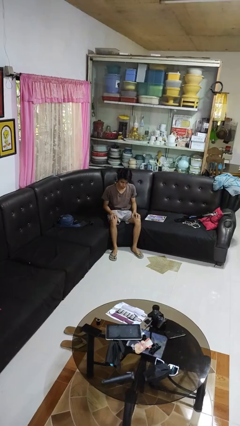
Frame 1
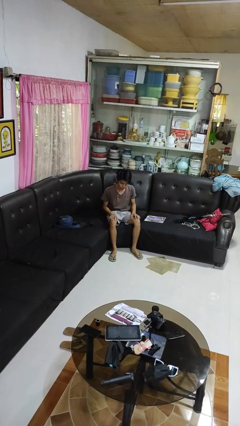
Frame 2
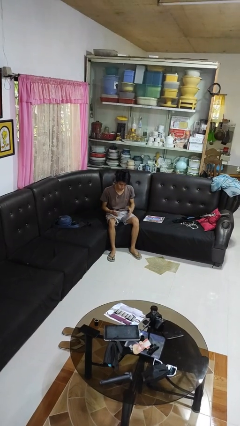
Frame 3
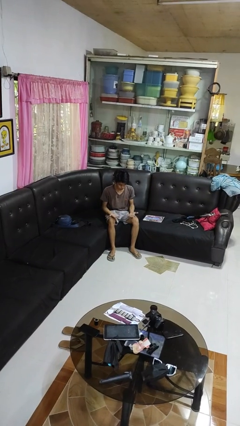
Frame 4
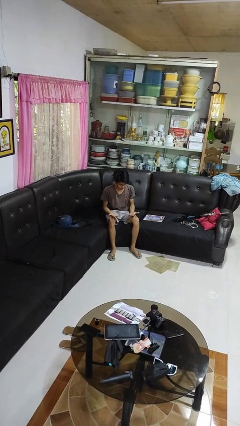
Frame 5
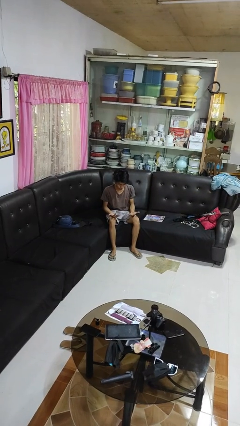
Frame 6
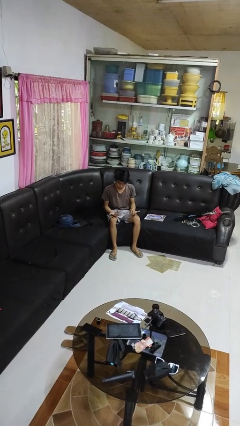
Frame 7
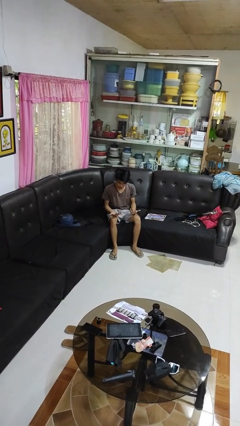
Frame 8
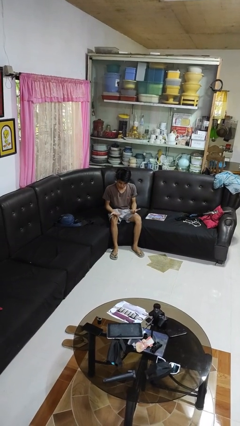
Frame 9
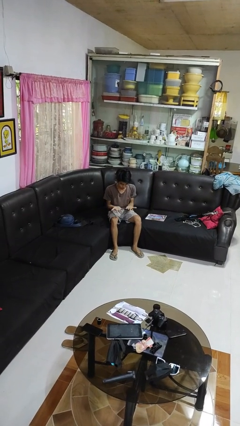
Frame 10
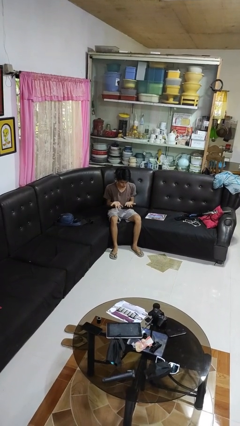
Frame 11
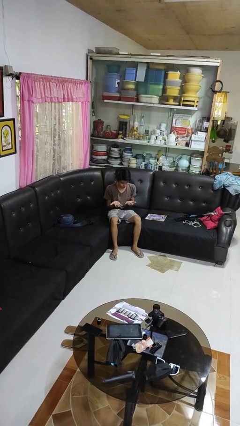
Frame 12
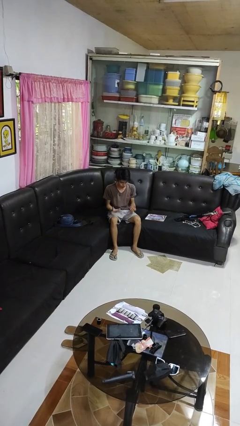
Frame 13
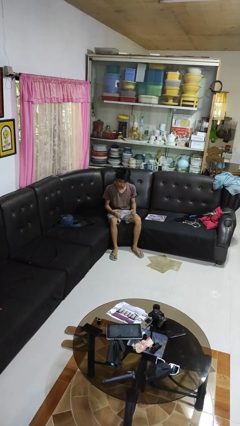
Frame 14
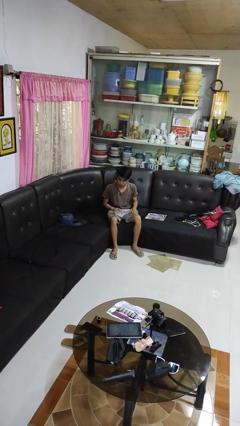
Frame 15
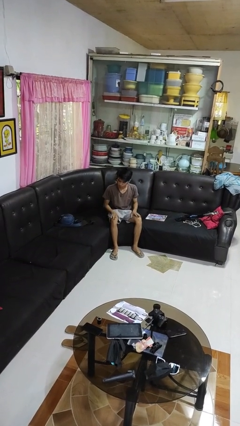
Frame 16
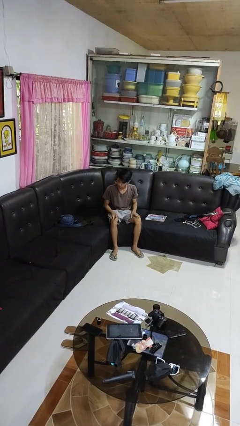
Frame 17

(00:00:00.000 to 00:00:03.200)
person looks at hands in lap

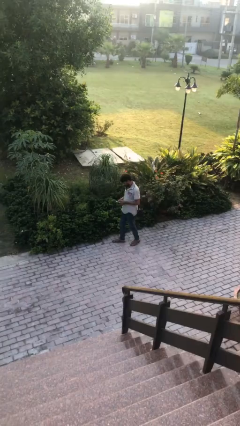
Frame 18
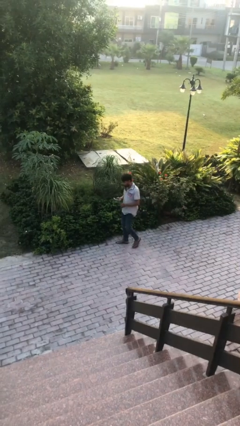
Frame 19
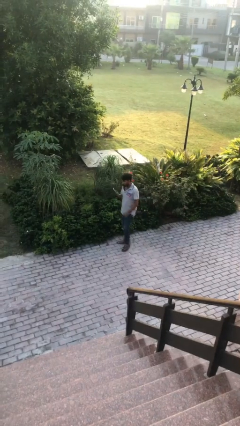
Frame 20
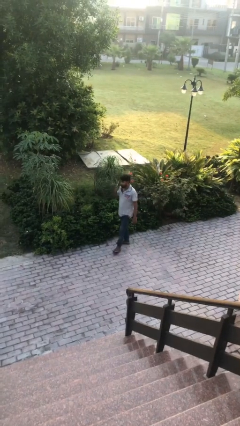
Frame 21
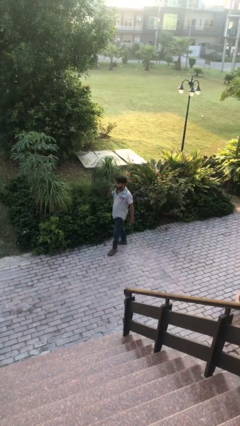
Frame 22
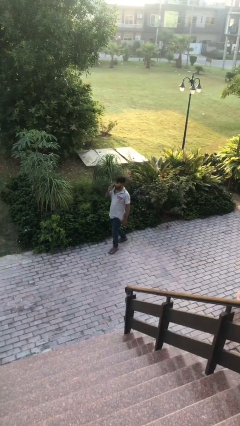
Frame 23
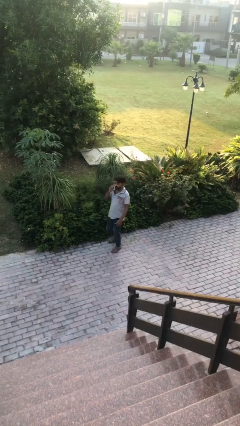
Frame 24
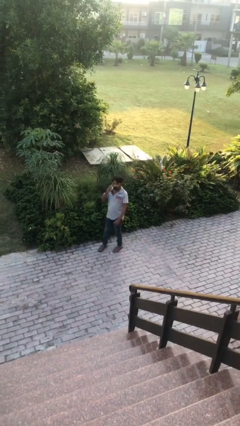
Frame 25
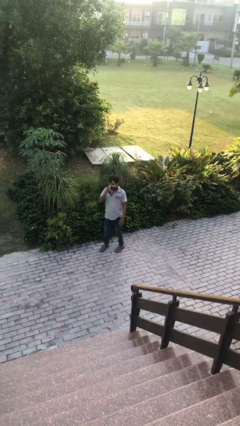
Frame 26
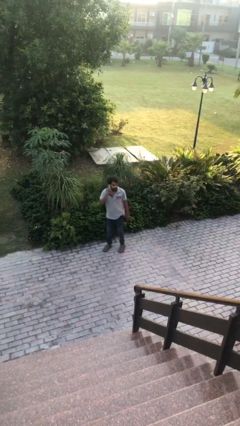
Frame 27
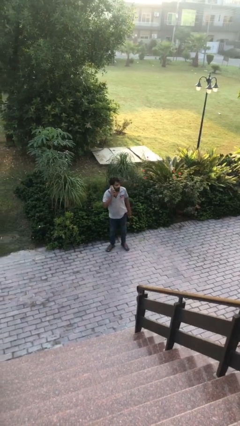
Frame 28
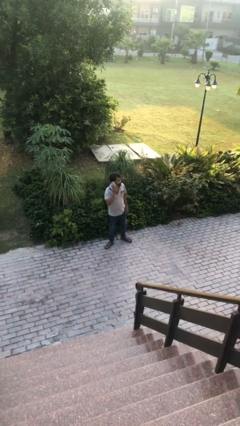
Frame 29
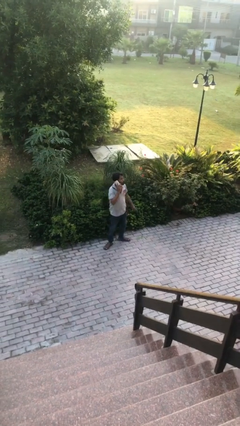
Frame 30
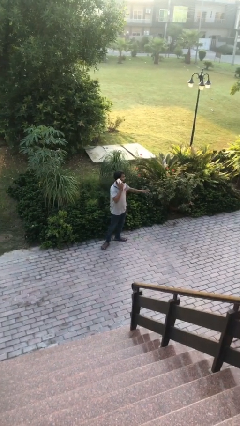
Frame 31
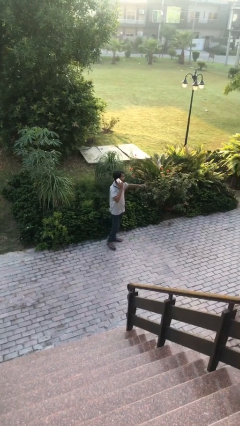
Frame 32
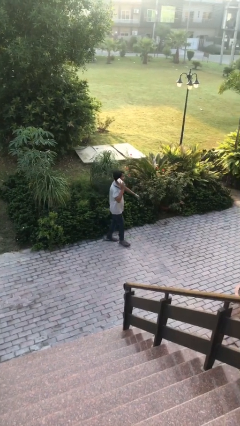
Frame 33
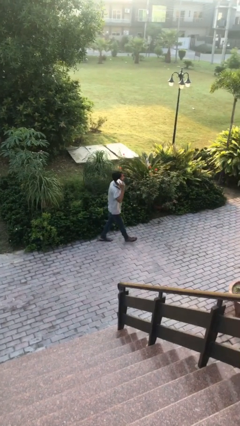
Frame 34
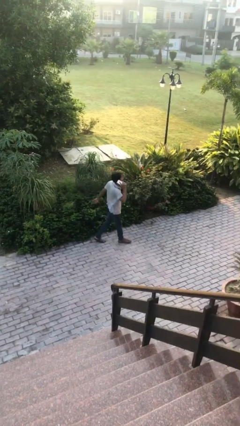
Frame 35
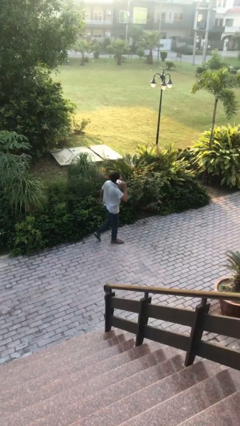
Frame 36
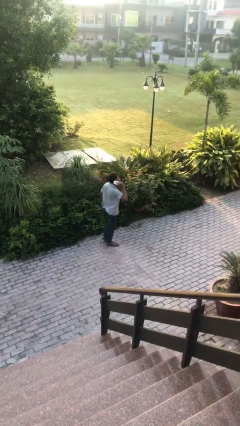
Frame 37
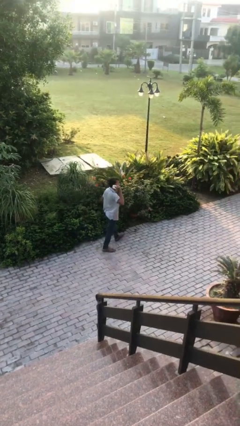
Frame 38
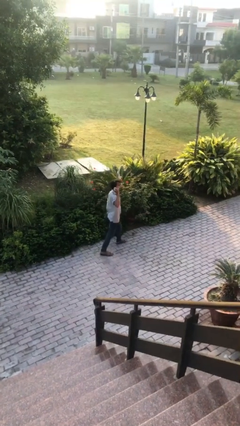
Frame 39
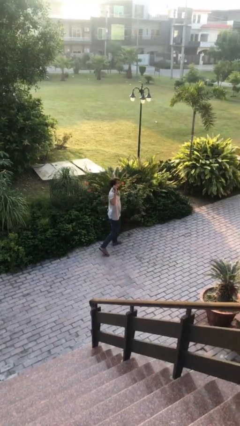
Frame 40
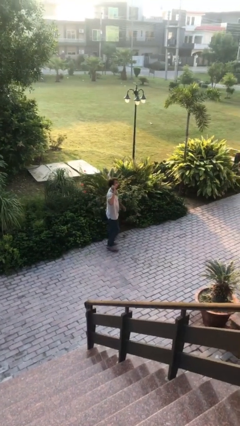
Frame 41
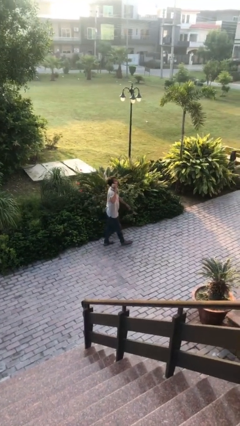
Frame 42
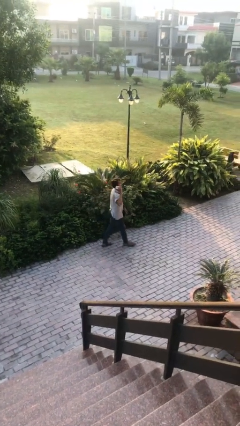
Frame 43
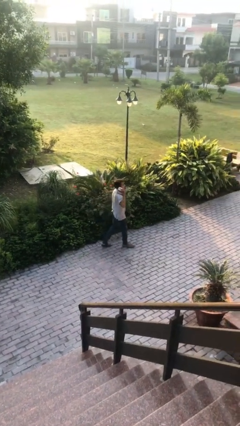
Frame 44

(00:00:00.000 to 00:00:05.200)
person talks on phone

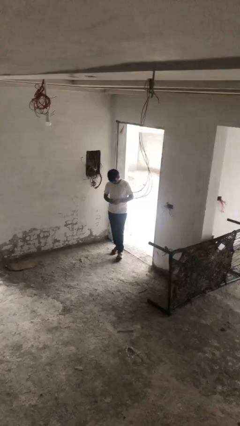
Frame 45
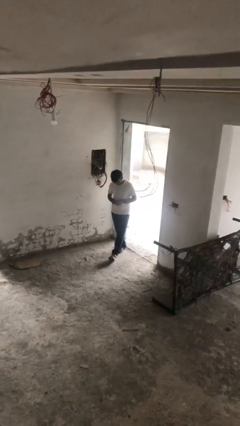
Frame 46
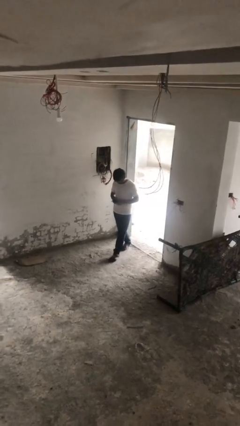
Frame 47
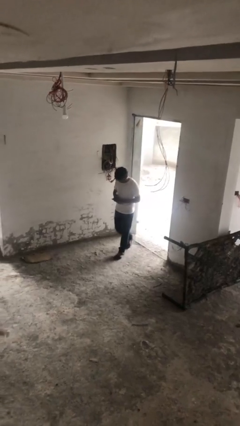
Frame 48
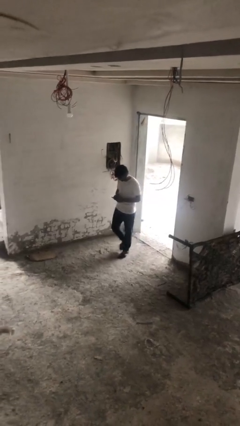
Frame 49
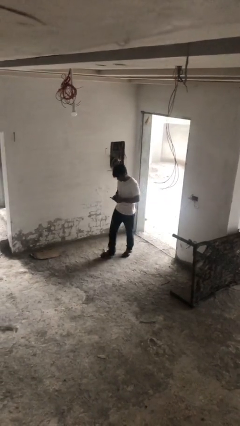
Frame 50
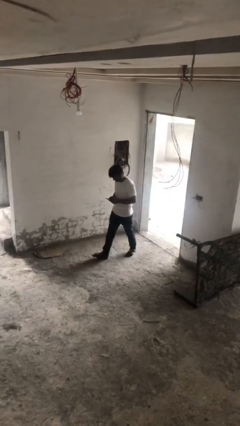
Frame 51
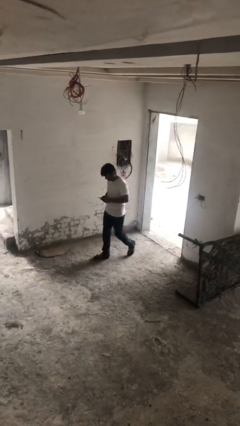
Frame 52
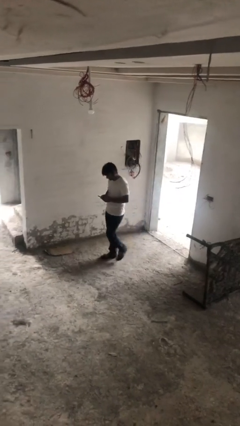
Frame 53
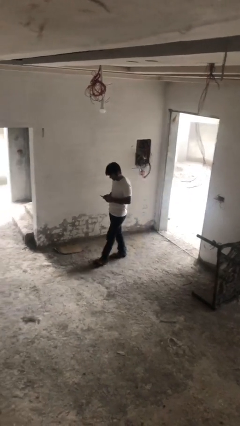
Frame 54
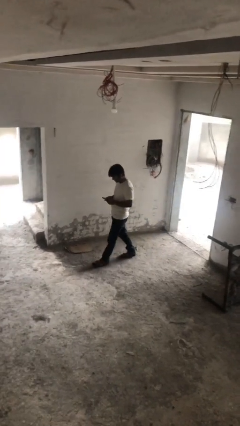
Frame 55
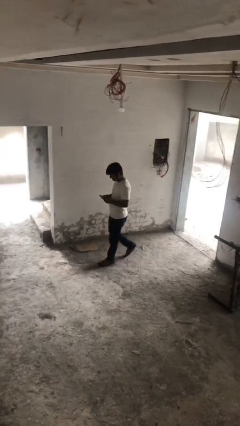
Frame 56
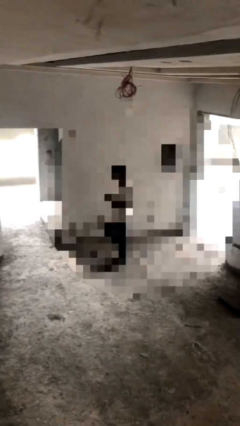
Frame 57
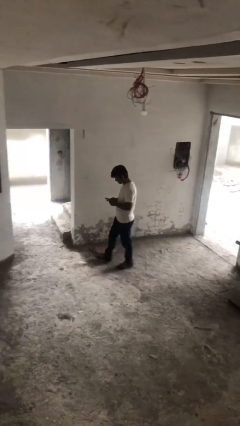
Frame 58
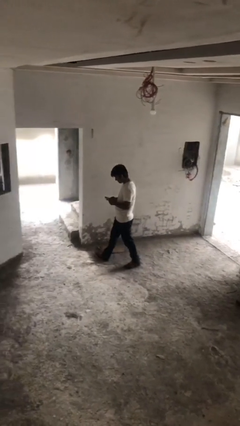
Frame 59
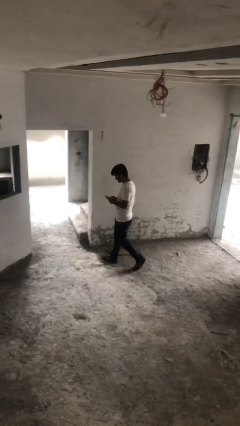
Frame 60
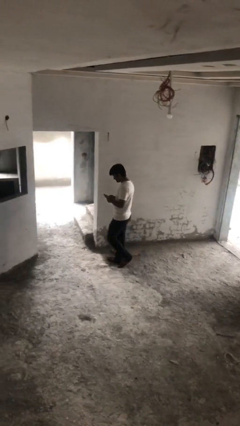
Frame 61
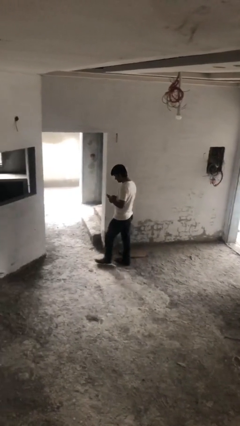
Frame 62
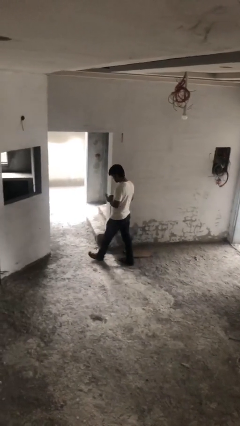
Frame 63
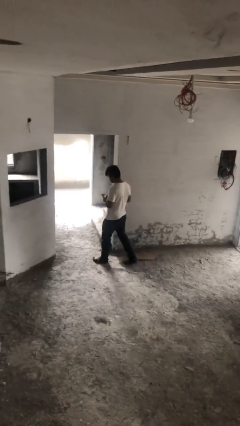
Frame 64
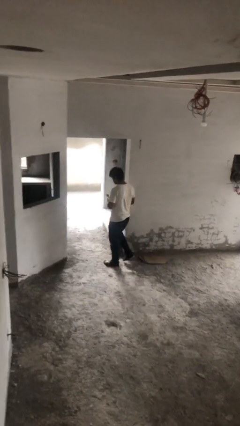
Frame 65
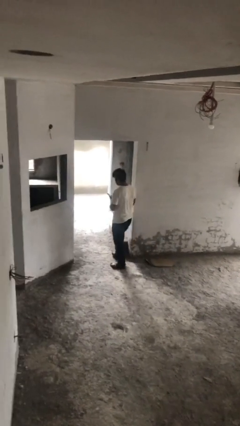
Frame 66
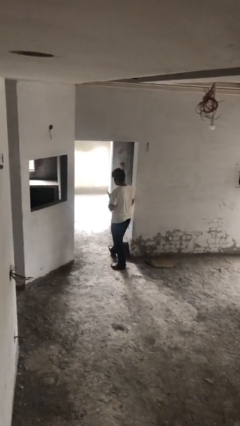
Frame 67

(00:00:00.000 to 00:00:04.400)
person texts on phone

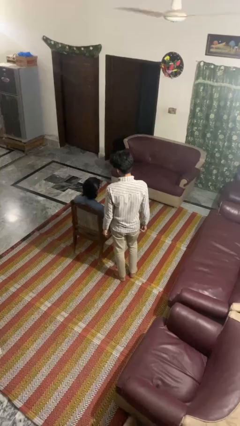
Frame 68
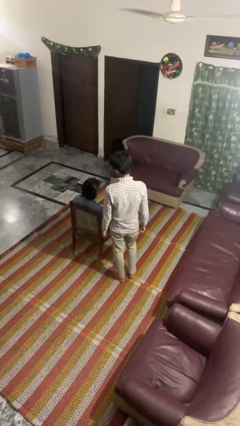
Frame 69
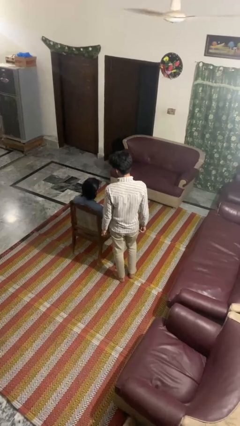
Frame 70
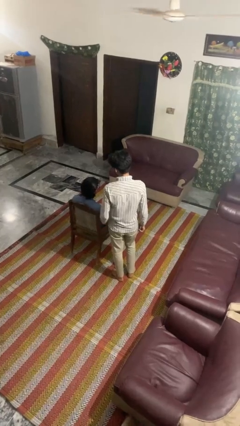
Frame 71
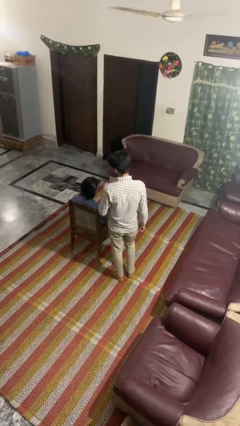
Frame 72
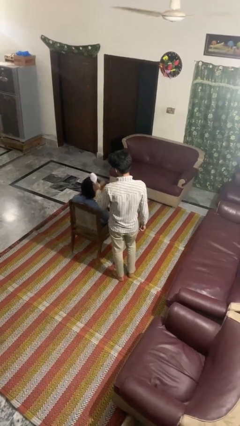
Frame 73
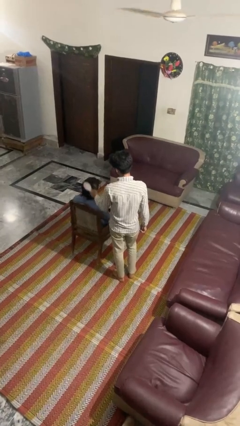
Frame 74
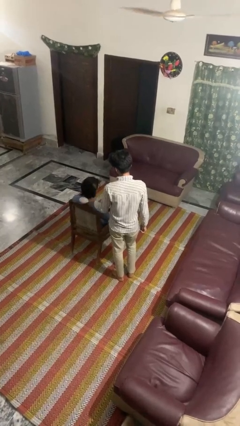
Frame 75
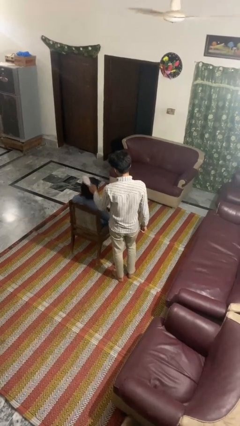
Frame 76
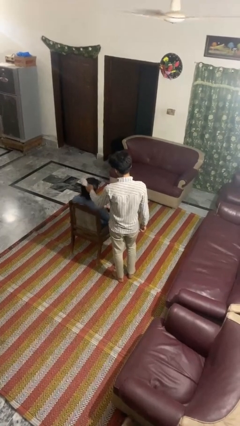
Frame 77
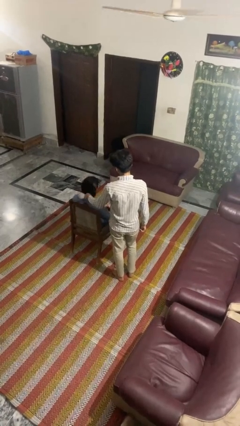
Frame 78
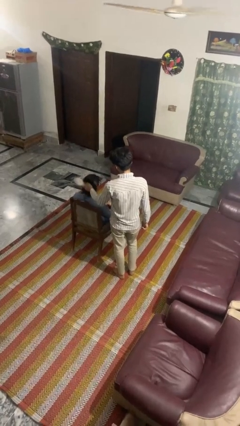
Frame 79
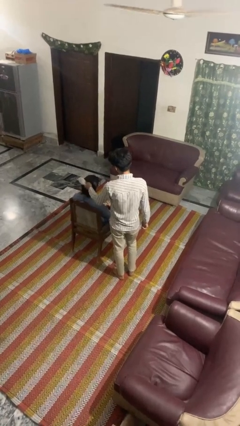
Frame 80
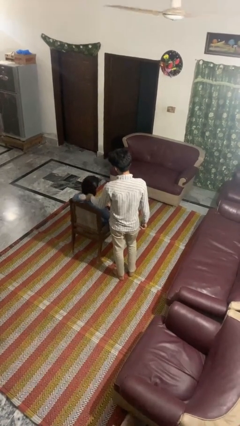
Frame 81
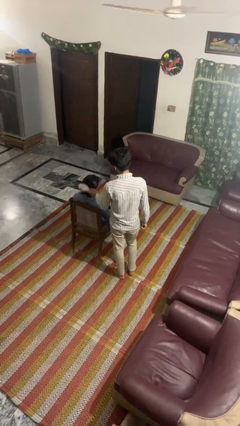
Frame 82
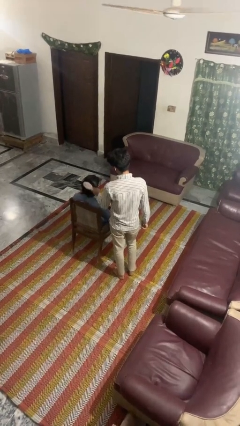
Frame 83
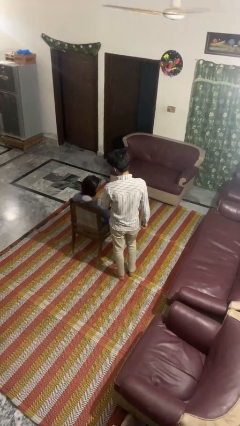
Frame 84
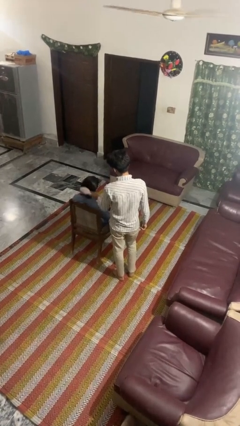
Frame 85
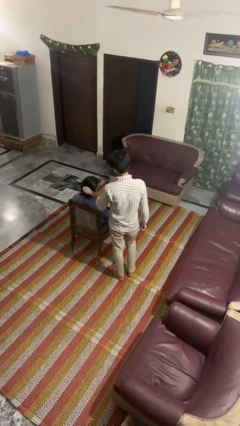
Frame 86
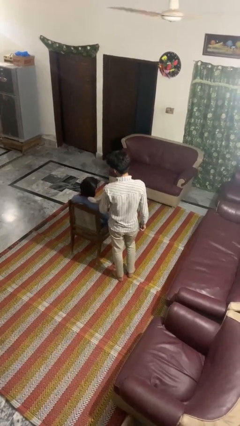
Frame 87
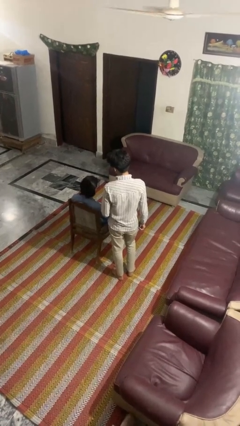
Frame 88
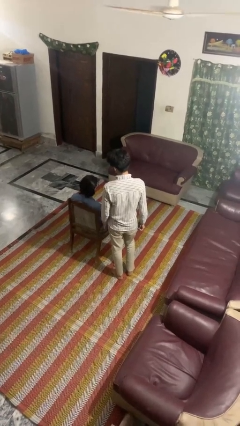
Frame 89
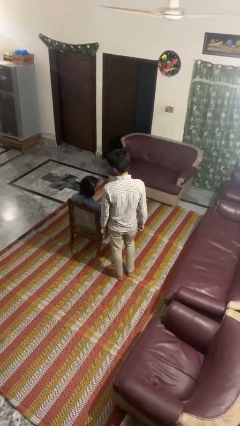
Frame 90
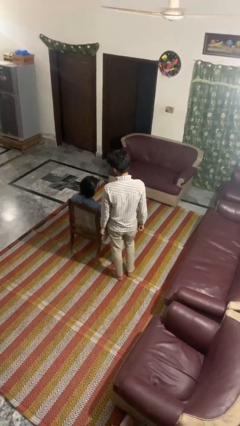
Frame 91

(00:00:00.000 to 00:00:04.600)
person brushes hair of person
